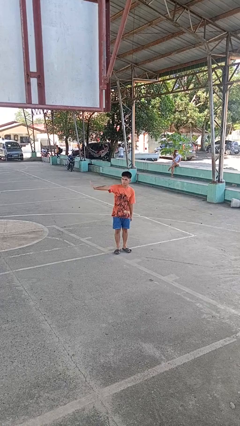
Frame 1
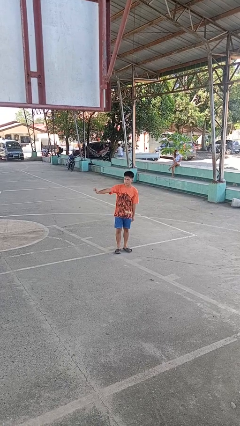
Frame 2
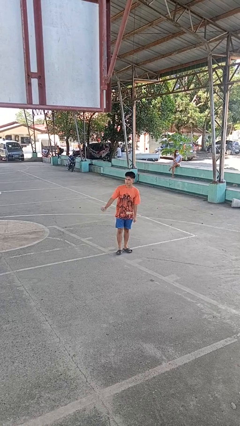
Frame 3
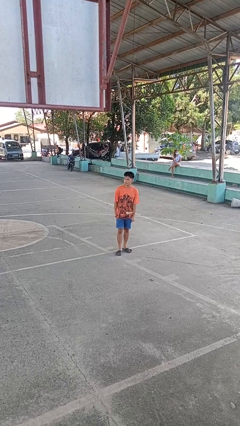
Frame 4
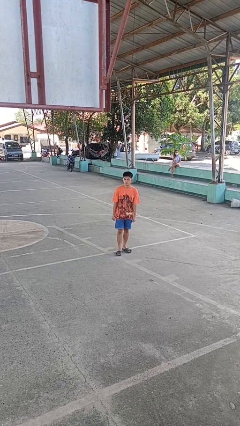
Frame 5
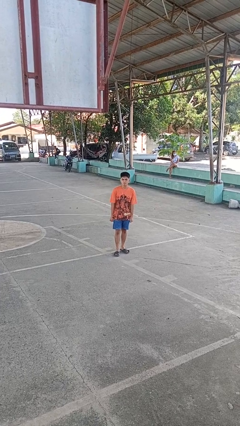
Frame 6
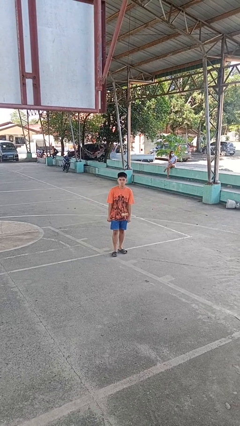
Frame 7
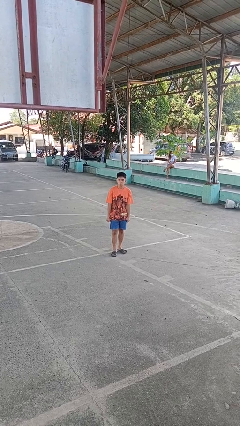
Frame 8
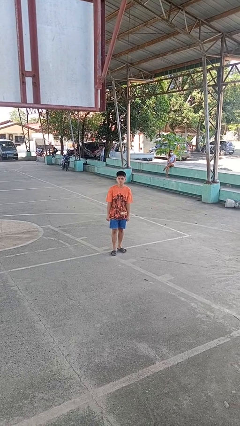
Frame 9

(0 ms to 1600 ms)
person gestures swipe right

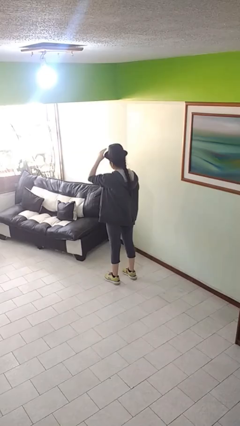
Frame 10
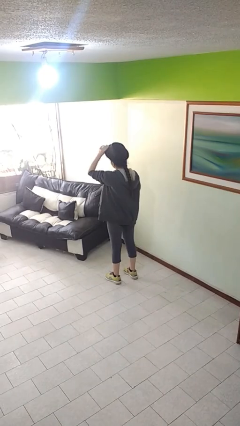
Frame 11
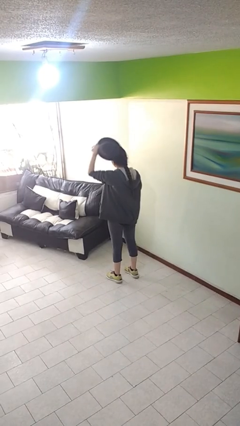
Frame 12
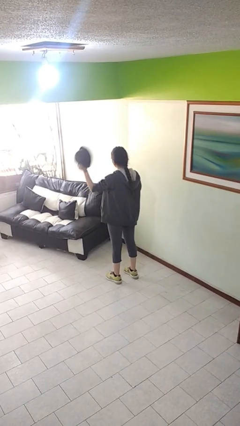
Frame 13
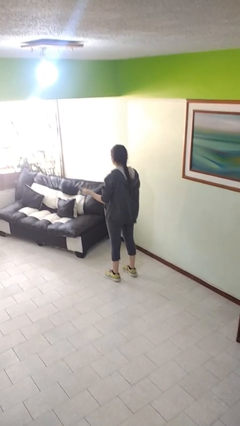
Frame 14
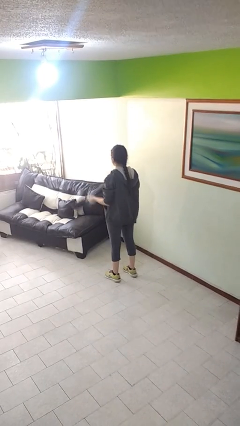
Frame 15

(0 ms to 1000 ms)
person takes off hat

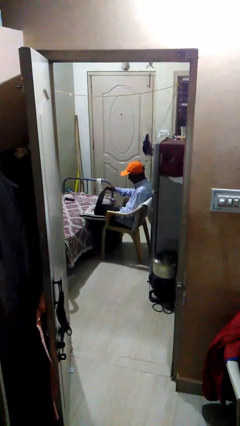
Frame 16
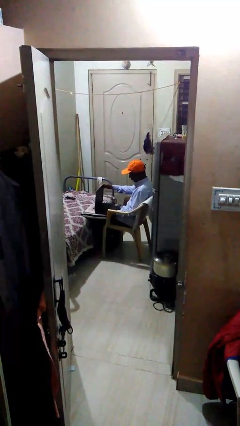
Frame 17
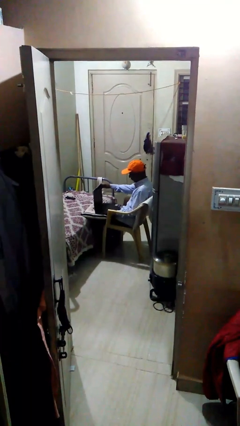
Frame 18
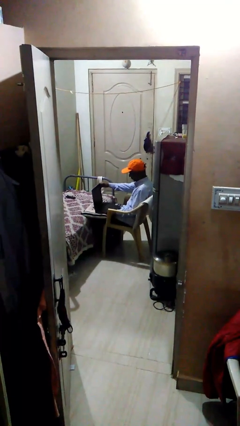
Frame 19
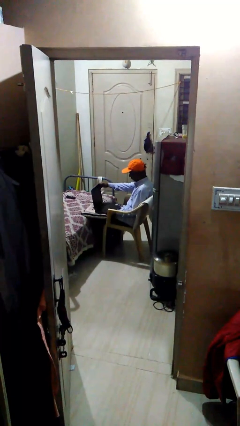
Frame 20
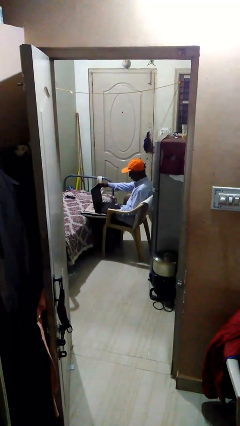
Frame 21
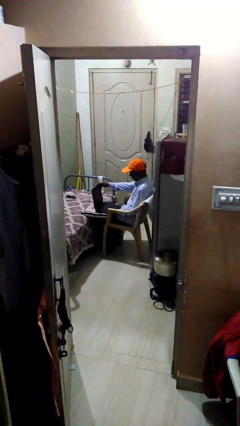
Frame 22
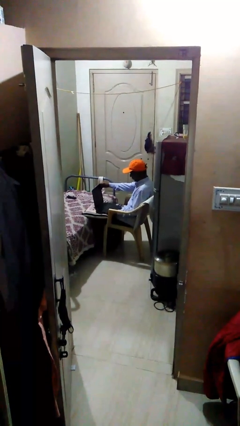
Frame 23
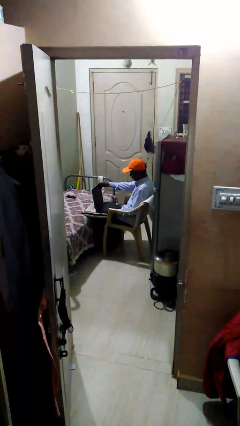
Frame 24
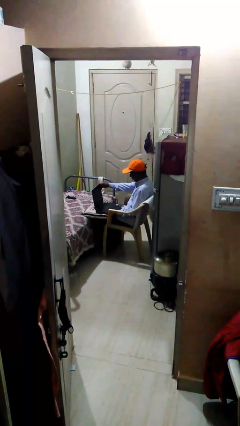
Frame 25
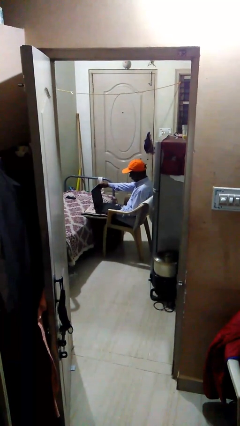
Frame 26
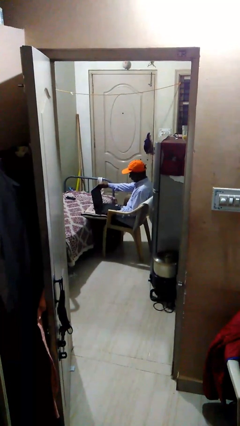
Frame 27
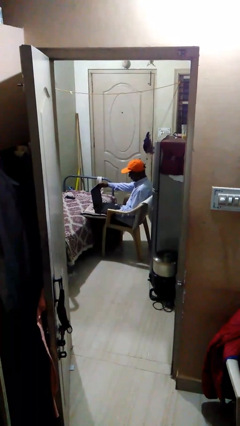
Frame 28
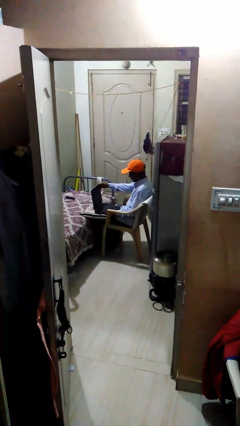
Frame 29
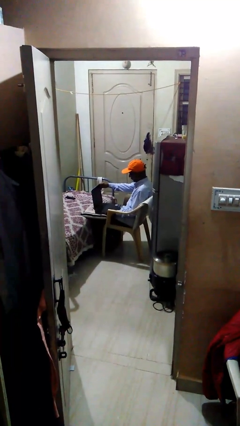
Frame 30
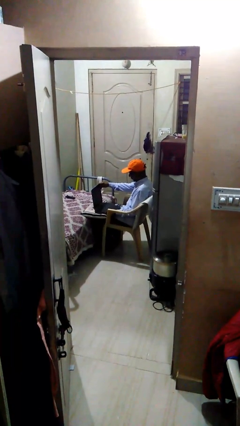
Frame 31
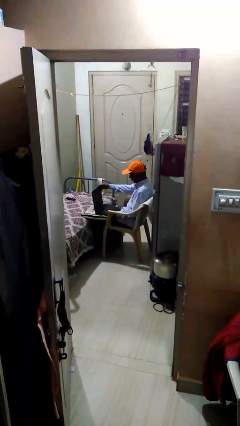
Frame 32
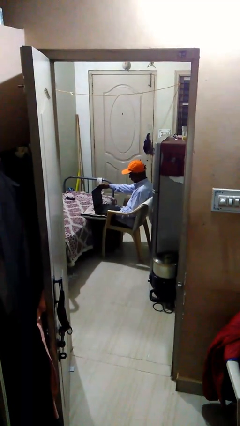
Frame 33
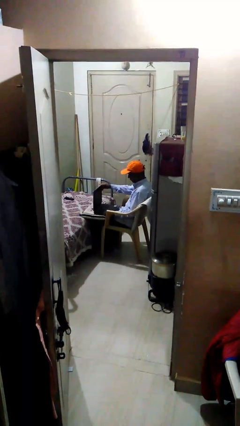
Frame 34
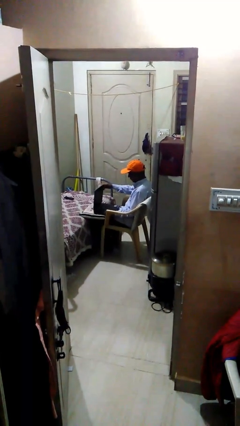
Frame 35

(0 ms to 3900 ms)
person interacts with laptop

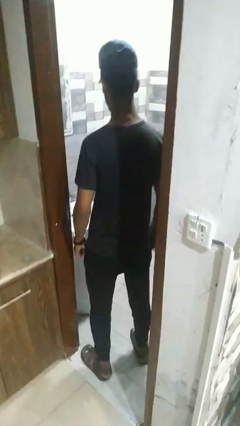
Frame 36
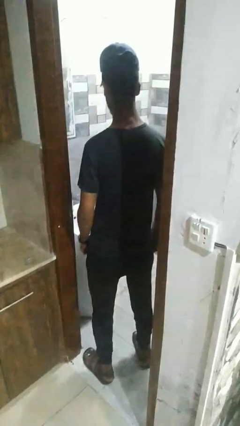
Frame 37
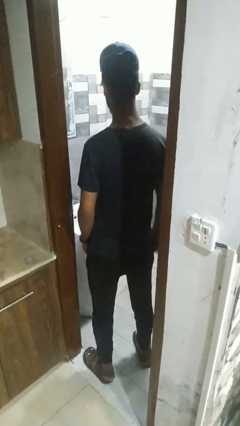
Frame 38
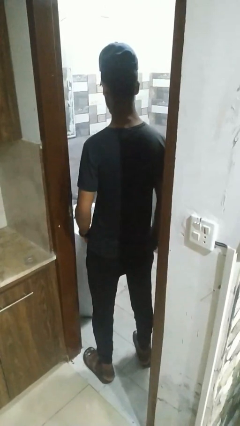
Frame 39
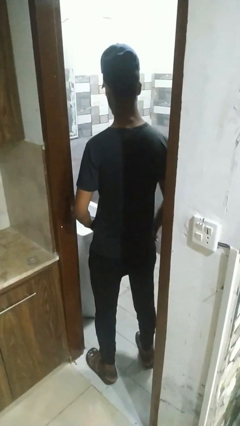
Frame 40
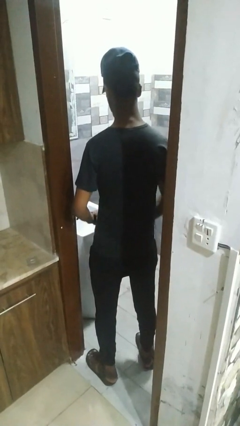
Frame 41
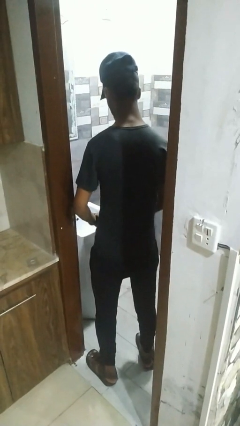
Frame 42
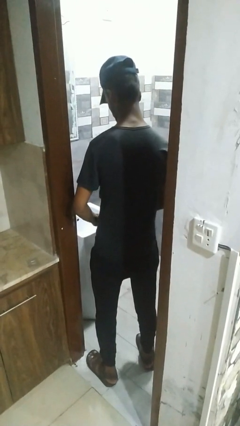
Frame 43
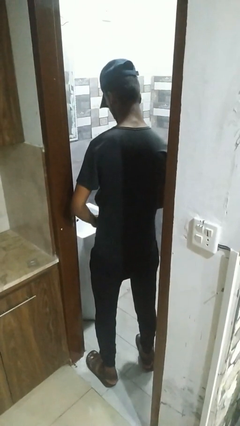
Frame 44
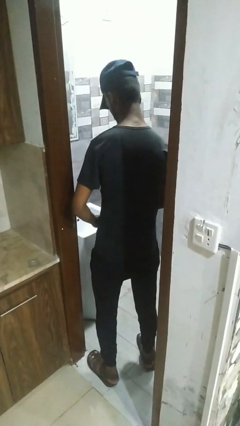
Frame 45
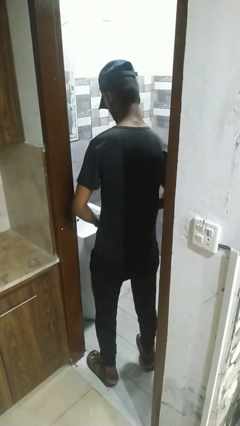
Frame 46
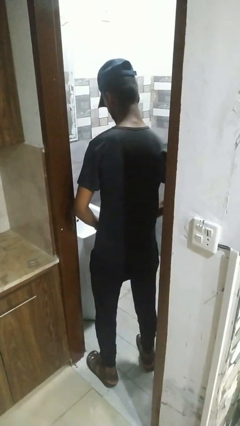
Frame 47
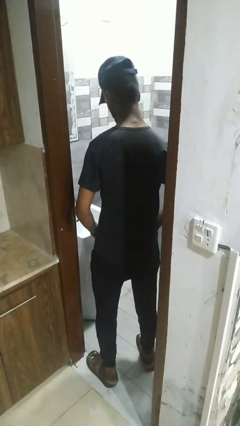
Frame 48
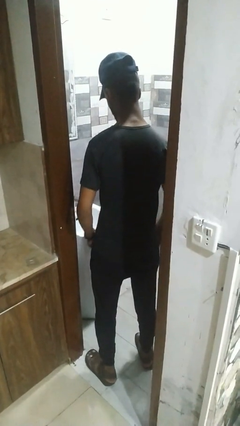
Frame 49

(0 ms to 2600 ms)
person applies deodorant

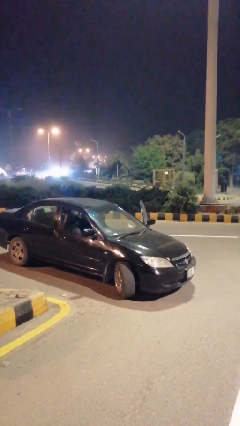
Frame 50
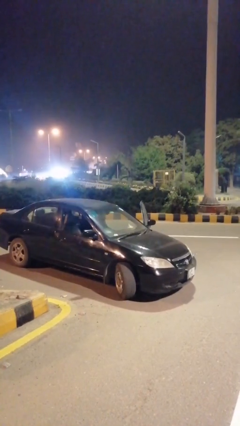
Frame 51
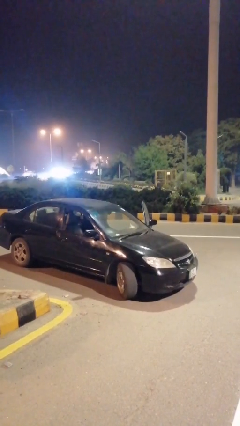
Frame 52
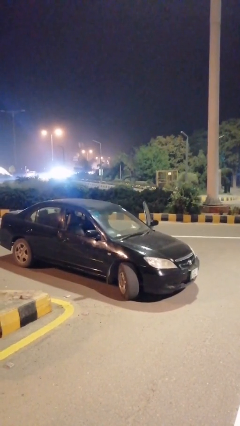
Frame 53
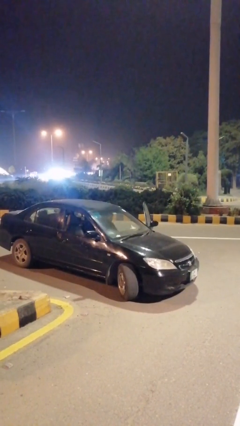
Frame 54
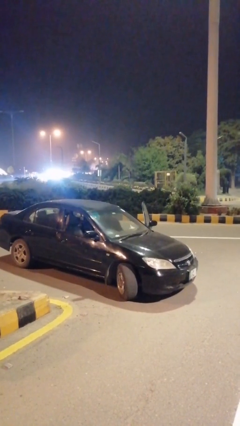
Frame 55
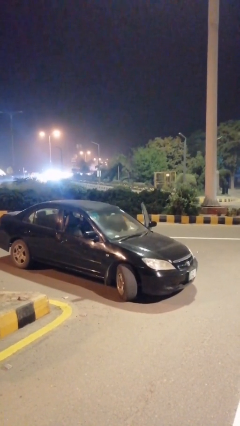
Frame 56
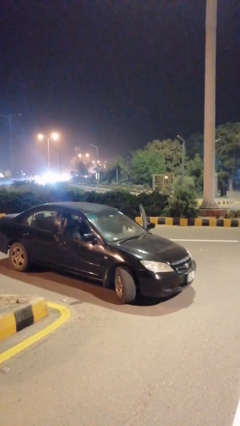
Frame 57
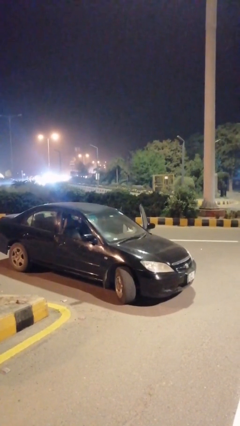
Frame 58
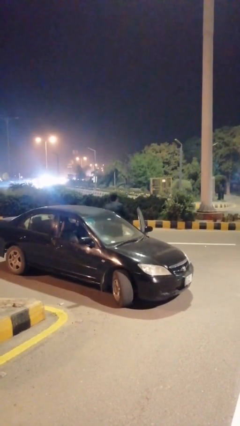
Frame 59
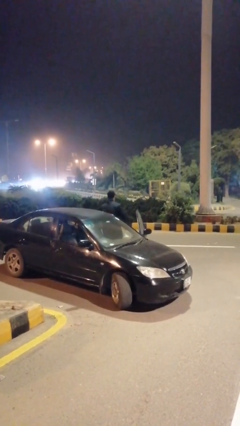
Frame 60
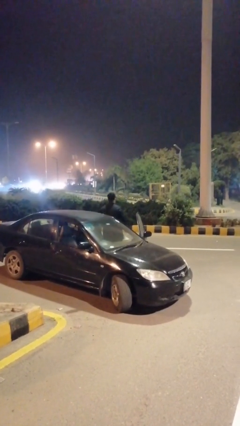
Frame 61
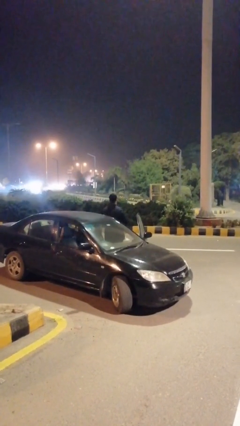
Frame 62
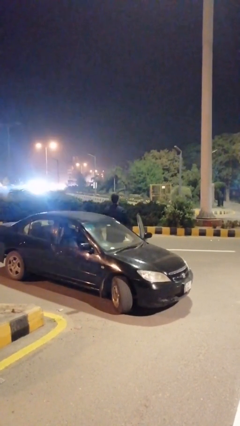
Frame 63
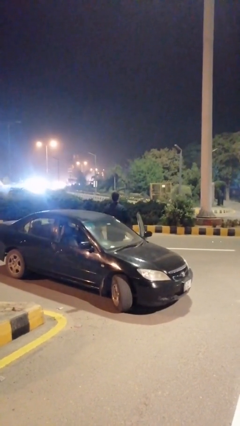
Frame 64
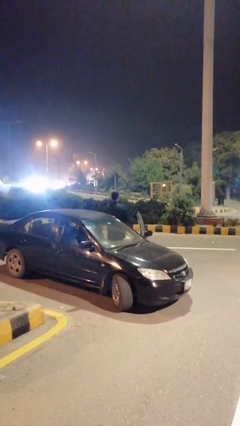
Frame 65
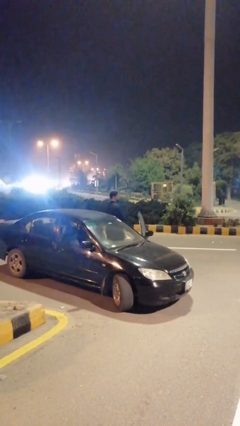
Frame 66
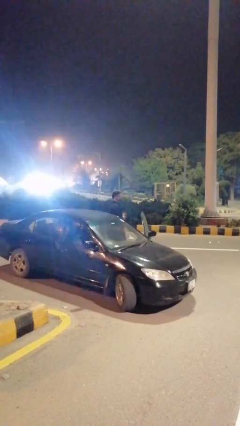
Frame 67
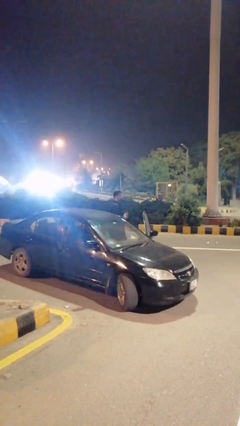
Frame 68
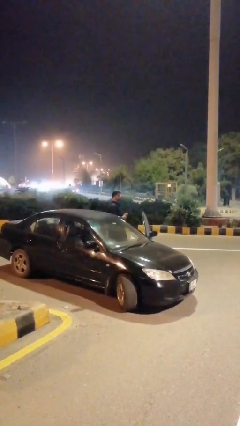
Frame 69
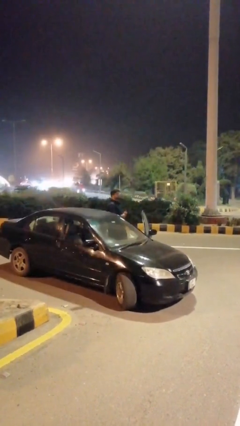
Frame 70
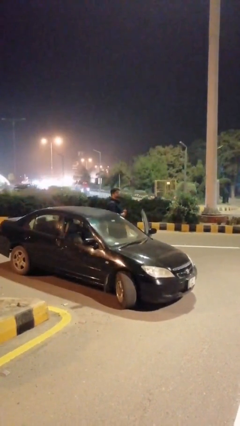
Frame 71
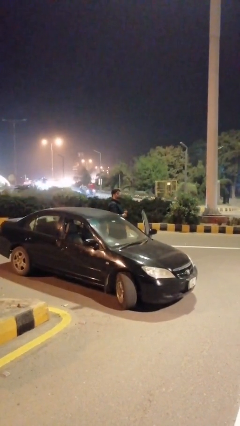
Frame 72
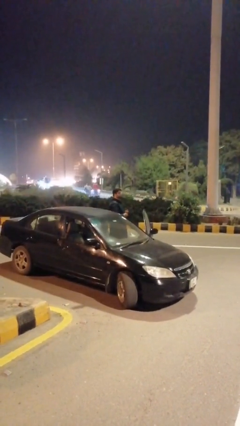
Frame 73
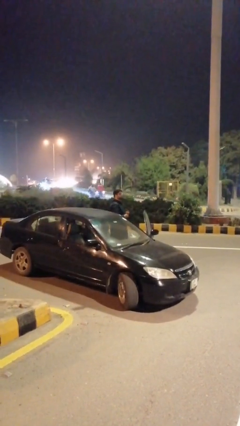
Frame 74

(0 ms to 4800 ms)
person exits car

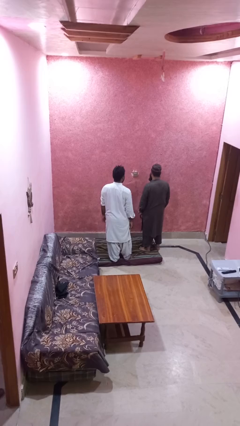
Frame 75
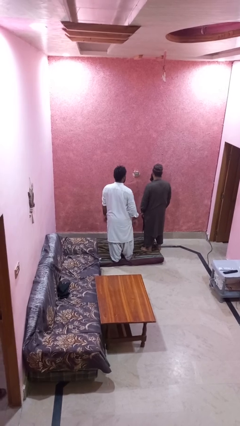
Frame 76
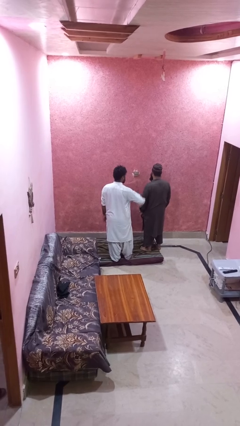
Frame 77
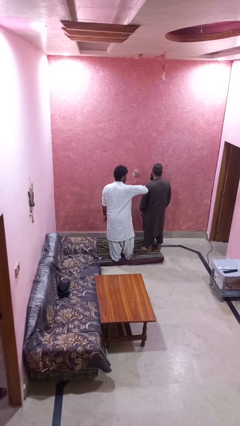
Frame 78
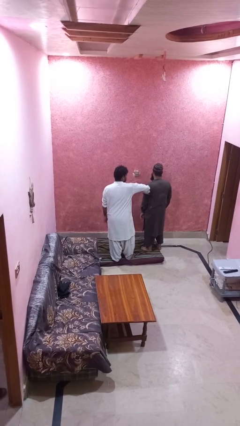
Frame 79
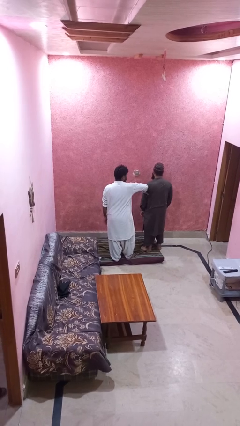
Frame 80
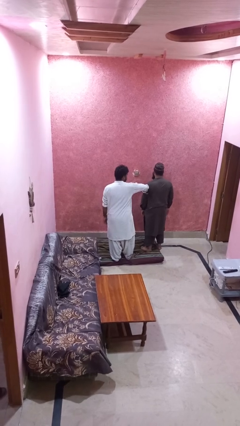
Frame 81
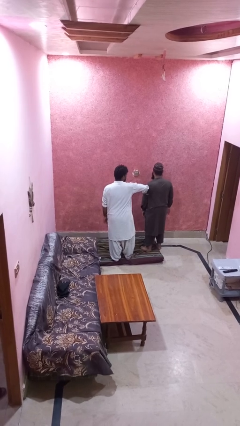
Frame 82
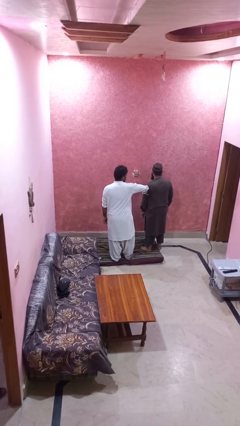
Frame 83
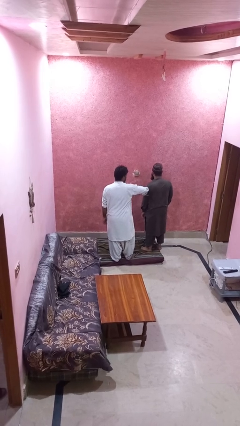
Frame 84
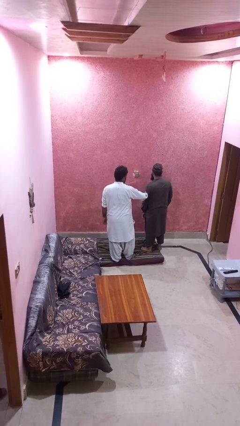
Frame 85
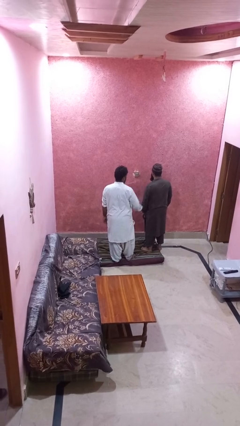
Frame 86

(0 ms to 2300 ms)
person grabs person by bicep

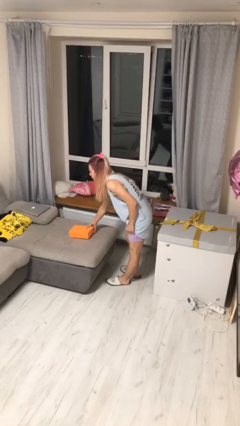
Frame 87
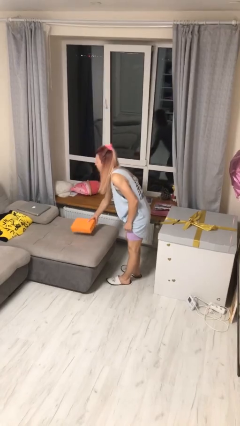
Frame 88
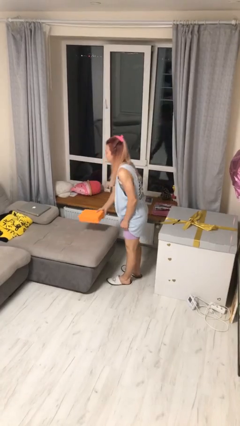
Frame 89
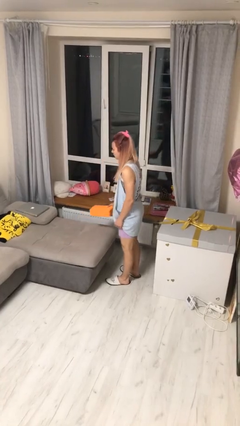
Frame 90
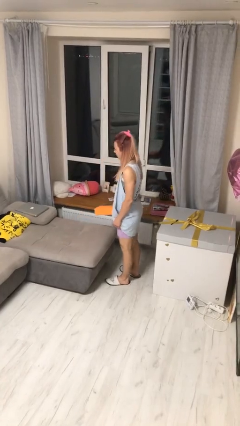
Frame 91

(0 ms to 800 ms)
person picks up object from couch

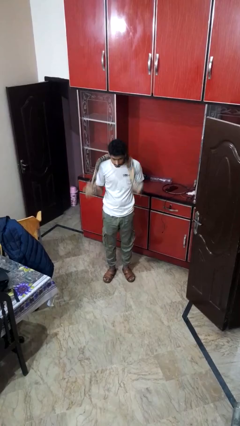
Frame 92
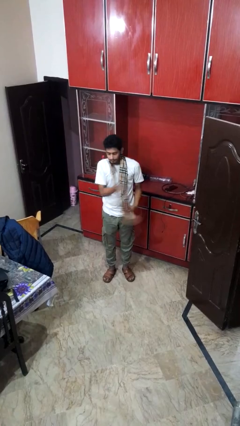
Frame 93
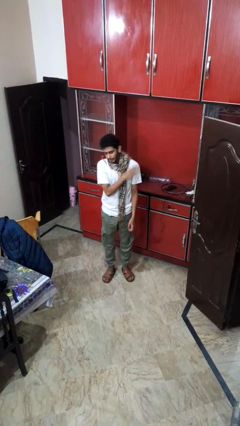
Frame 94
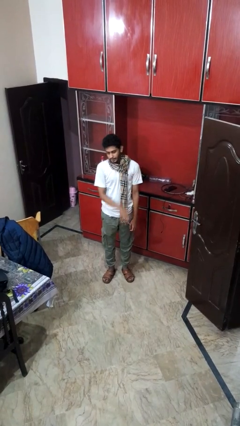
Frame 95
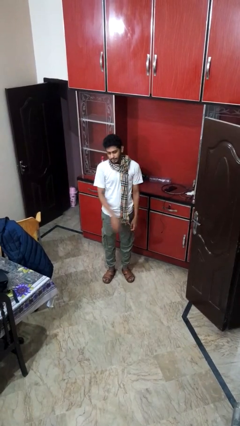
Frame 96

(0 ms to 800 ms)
person puts on scarf
